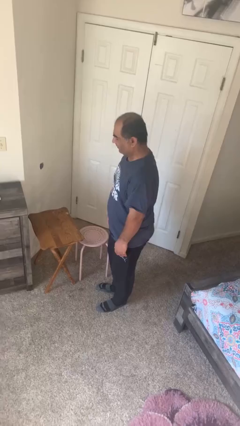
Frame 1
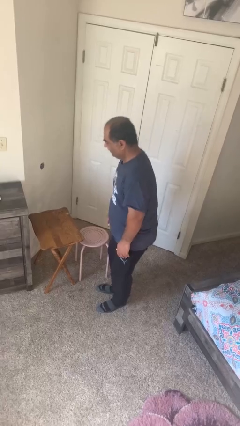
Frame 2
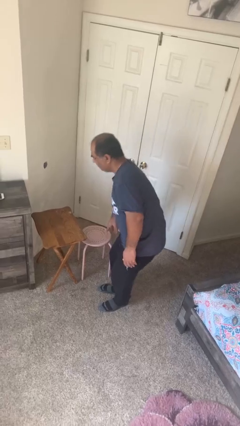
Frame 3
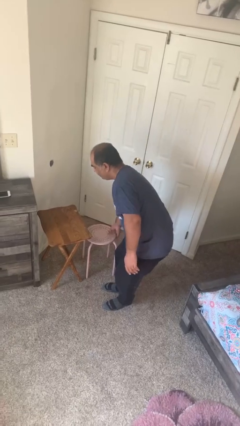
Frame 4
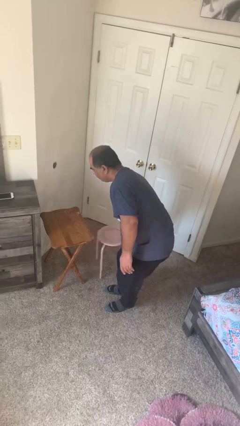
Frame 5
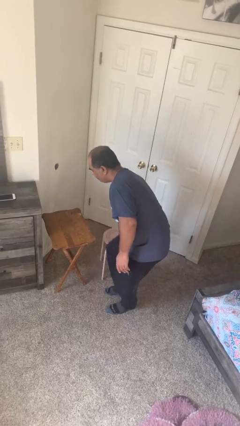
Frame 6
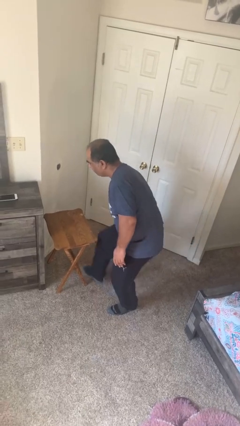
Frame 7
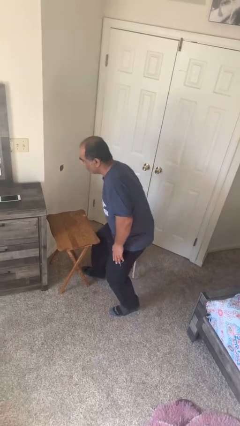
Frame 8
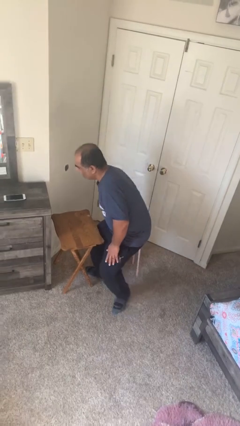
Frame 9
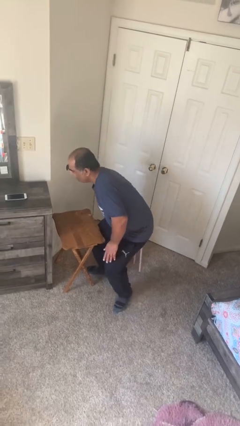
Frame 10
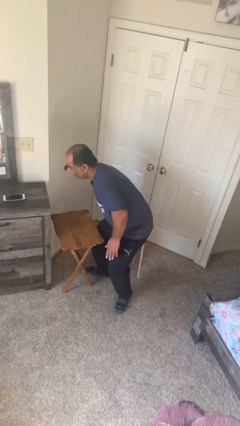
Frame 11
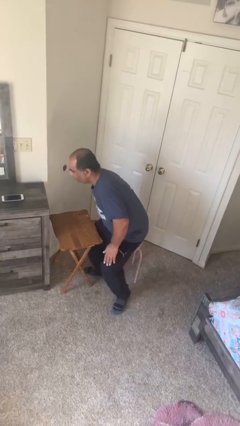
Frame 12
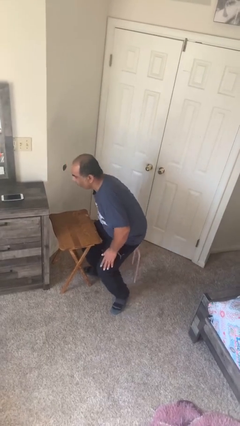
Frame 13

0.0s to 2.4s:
person sits down

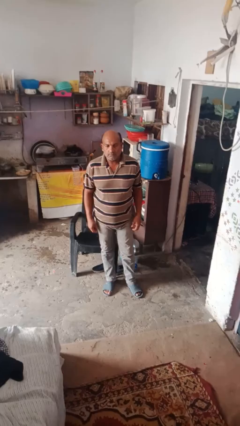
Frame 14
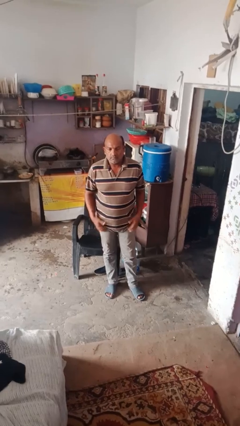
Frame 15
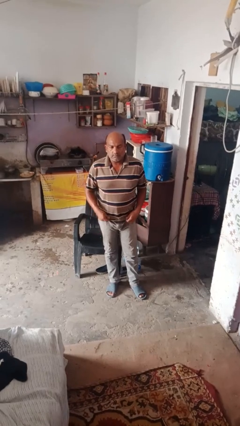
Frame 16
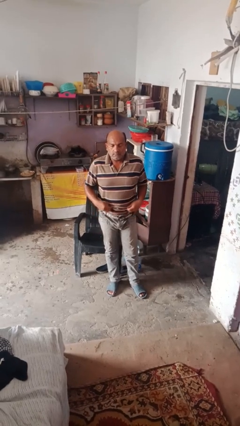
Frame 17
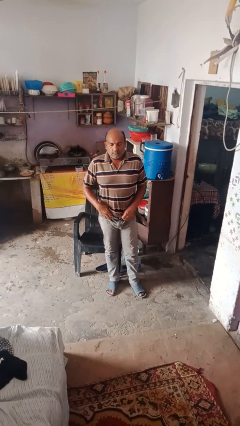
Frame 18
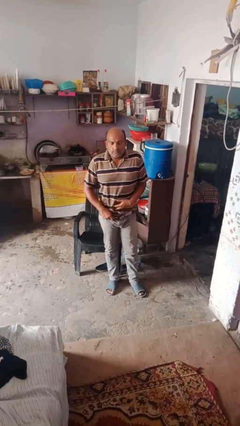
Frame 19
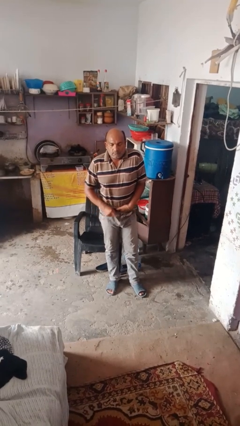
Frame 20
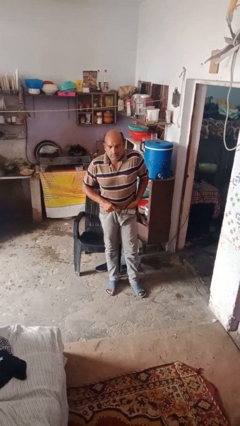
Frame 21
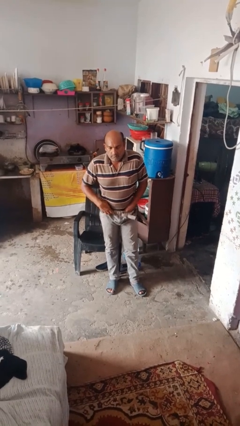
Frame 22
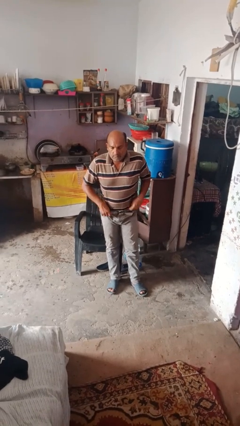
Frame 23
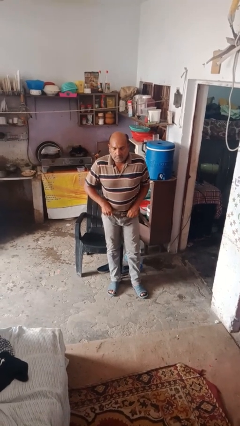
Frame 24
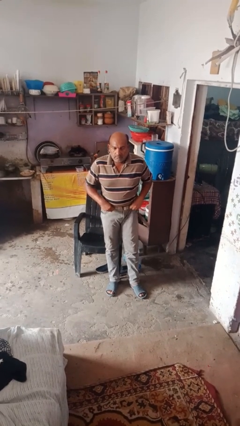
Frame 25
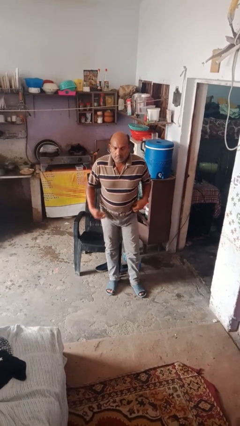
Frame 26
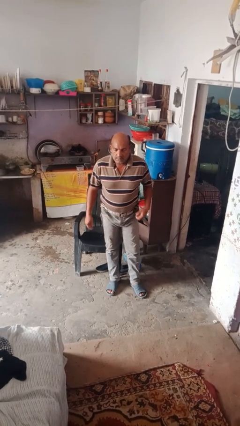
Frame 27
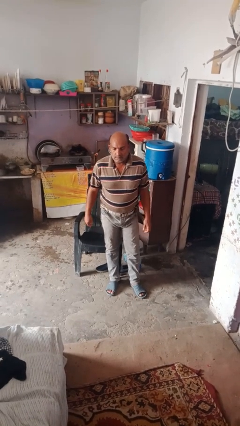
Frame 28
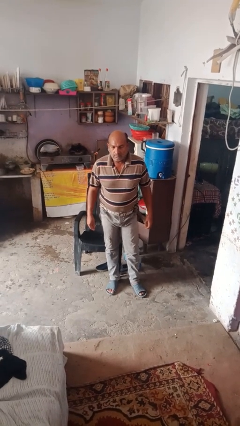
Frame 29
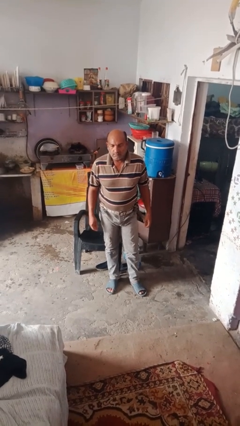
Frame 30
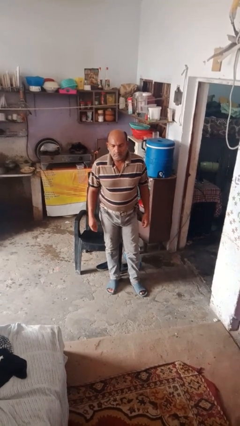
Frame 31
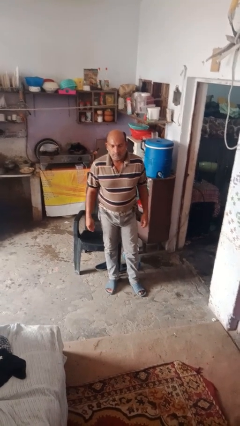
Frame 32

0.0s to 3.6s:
person tucks in shirt

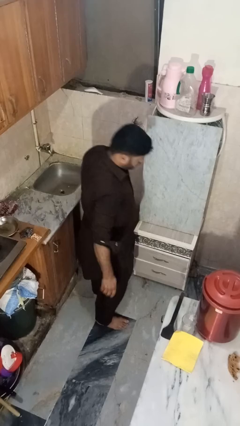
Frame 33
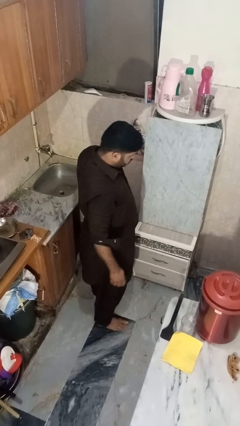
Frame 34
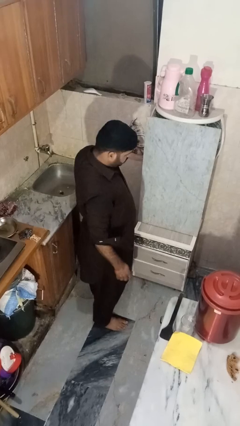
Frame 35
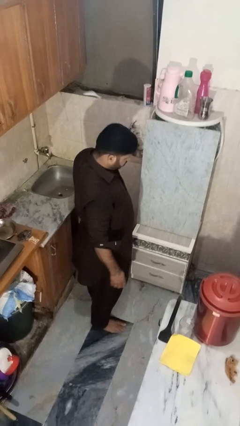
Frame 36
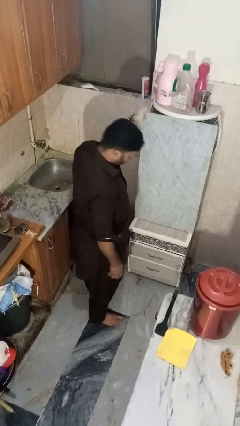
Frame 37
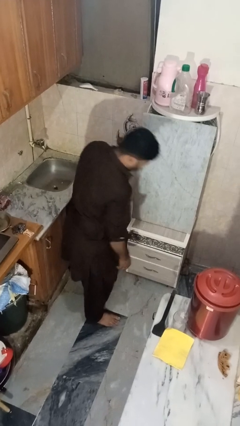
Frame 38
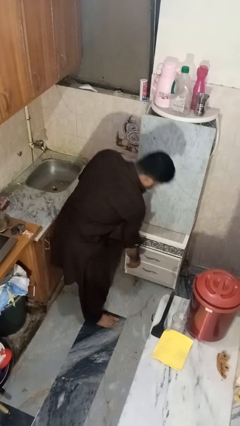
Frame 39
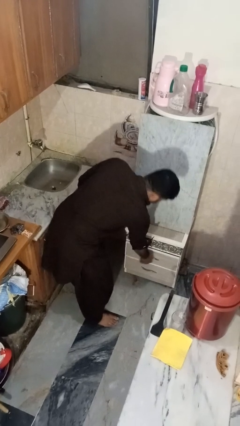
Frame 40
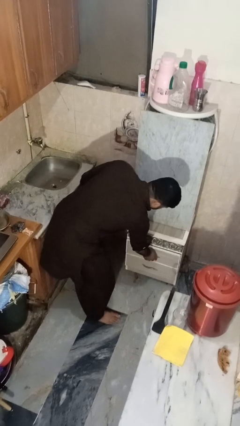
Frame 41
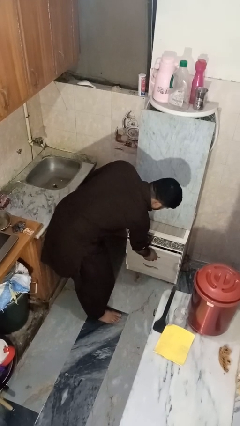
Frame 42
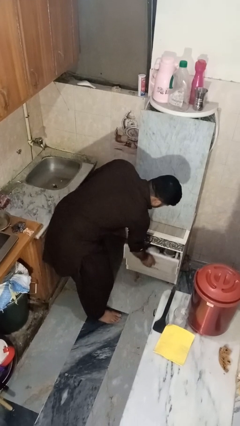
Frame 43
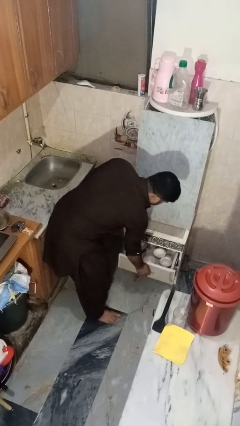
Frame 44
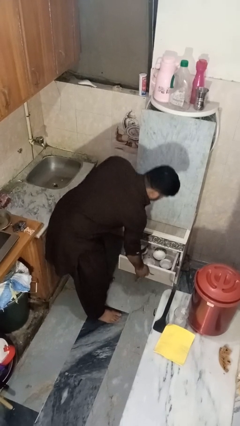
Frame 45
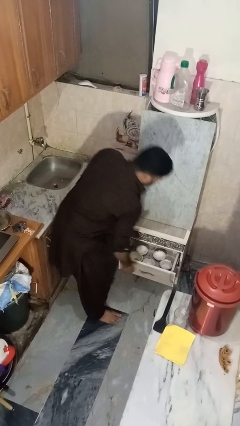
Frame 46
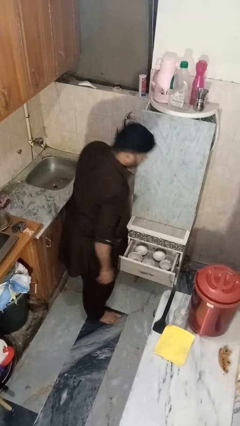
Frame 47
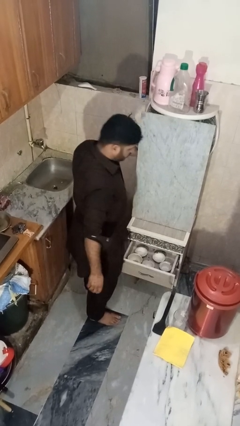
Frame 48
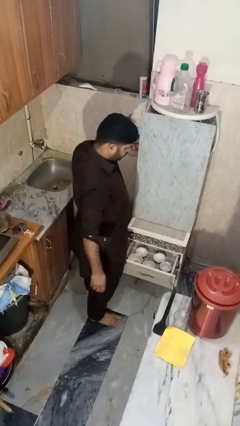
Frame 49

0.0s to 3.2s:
person opens kitchen drawer

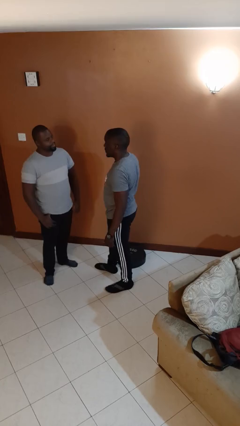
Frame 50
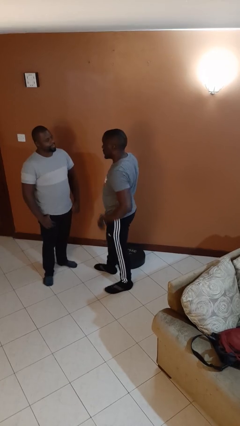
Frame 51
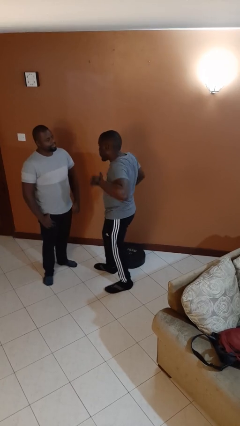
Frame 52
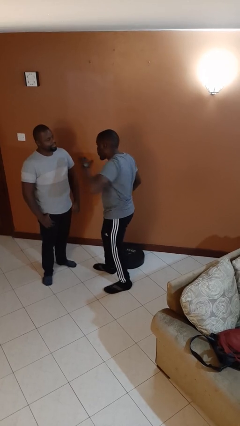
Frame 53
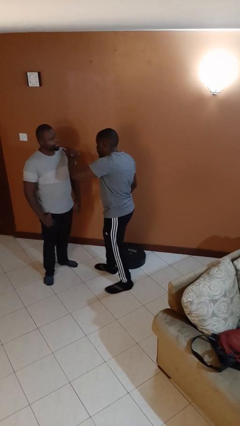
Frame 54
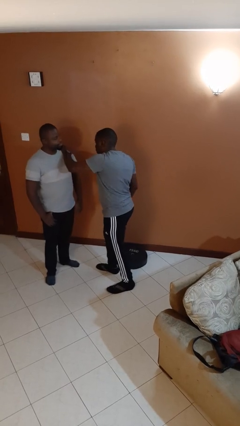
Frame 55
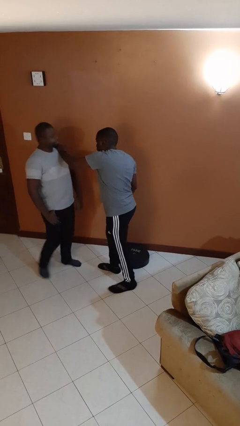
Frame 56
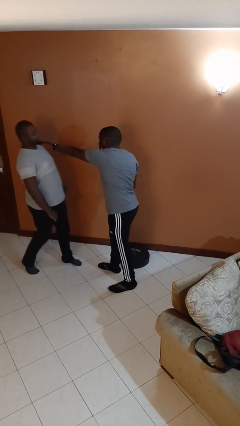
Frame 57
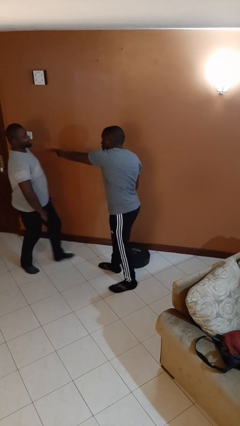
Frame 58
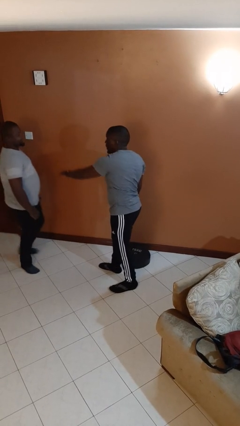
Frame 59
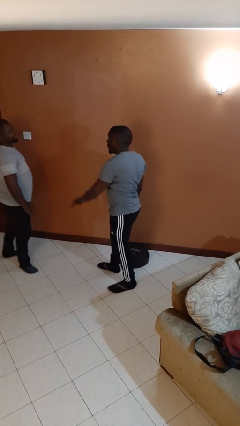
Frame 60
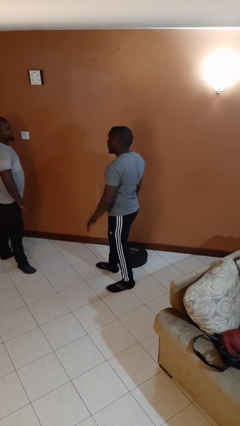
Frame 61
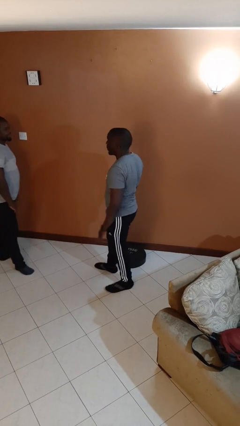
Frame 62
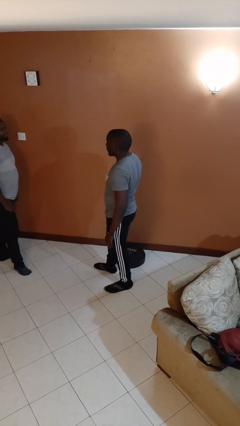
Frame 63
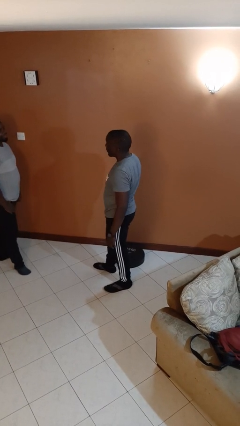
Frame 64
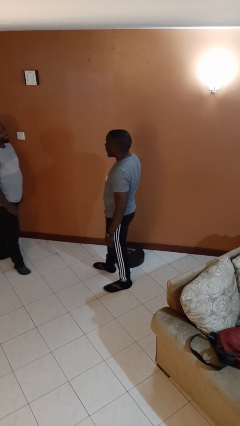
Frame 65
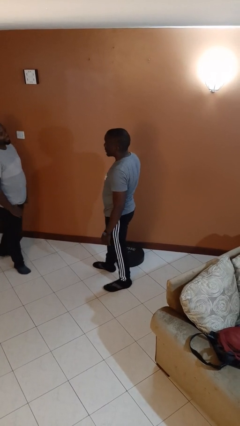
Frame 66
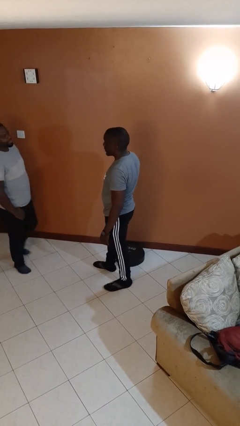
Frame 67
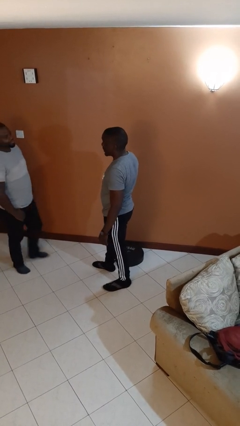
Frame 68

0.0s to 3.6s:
person shoves person

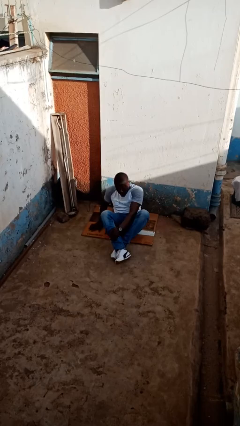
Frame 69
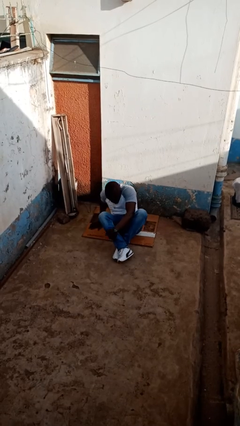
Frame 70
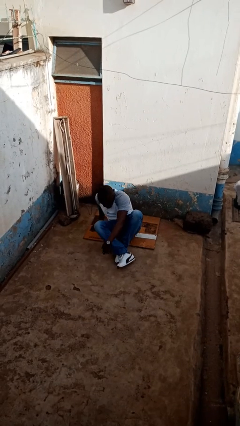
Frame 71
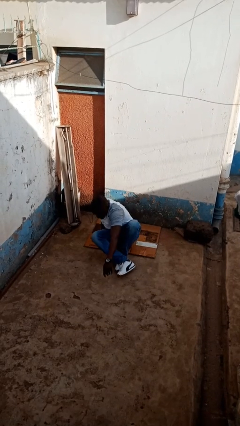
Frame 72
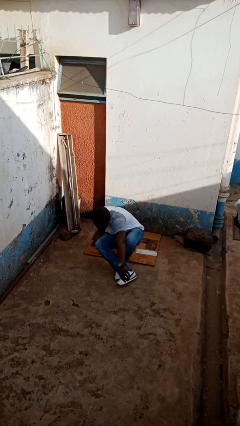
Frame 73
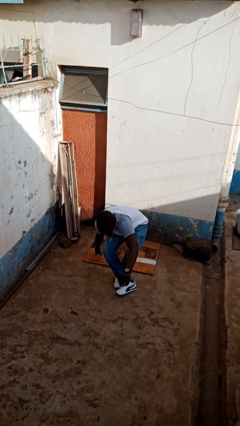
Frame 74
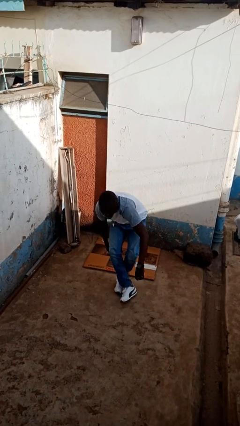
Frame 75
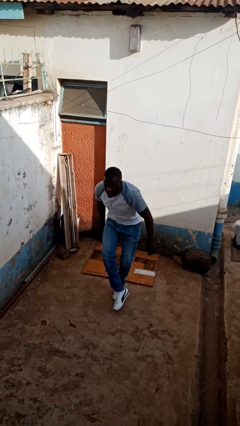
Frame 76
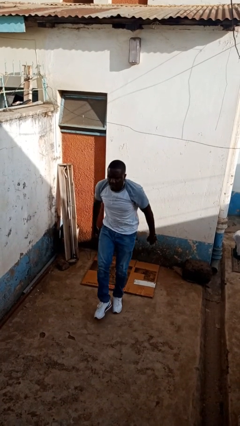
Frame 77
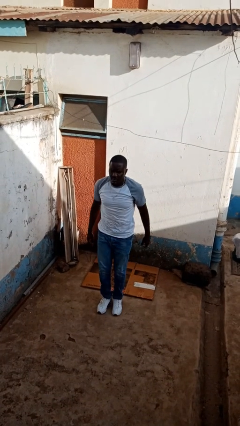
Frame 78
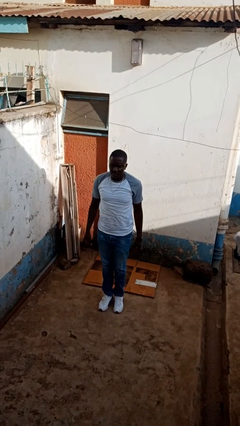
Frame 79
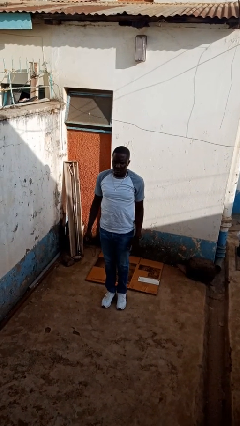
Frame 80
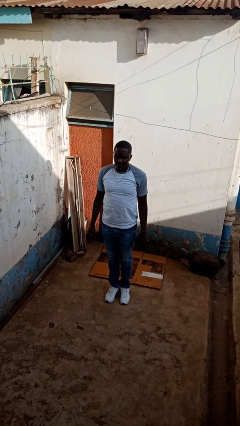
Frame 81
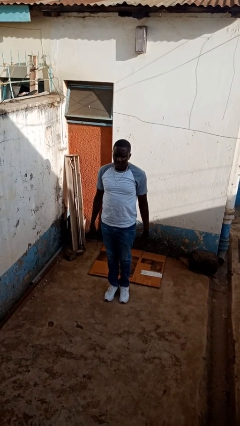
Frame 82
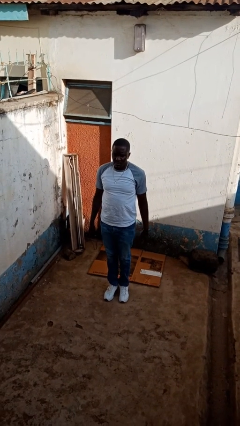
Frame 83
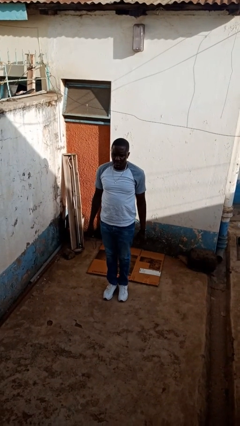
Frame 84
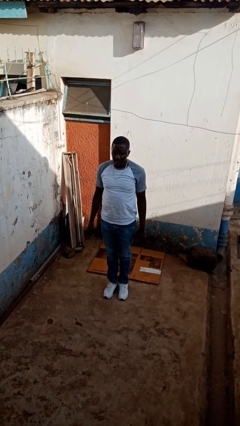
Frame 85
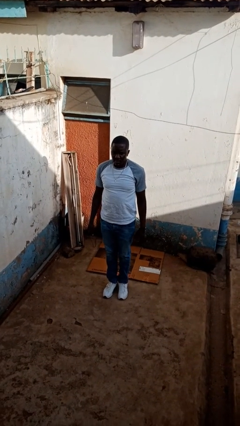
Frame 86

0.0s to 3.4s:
person stands up from floor

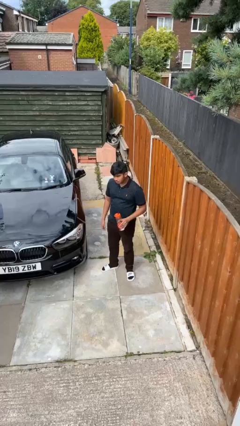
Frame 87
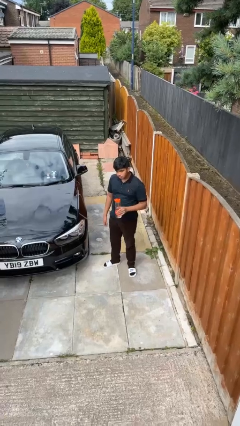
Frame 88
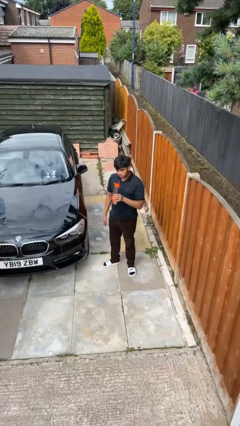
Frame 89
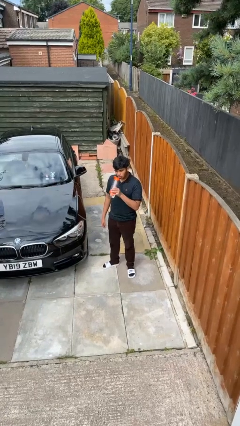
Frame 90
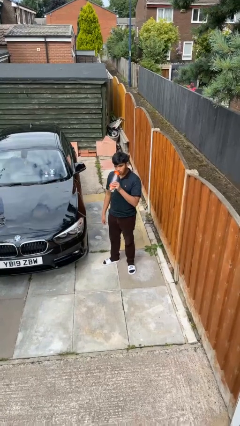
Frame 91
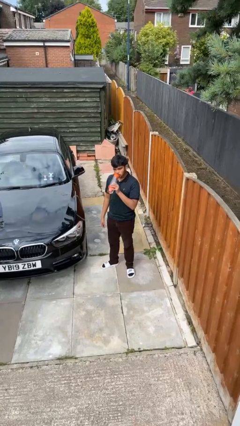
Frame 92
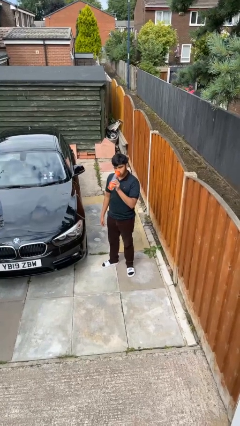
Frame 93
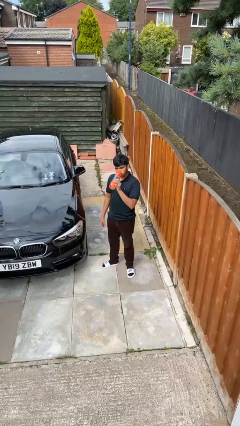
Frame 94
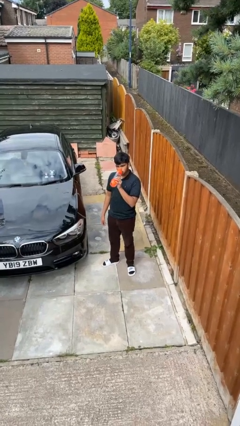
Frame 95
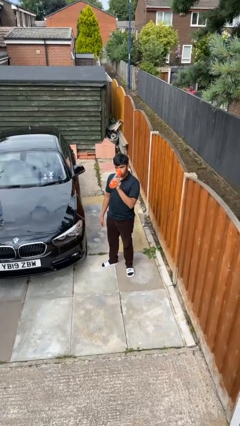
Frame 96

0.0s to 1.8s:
person drinks from bottle
